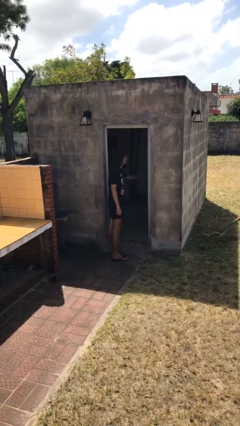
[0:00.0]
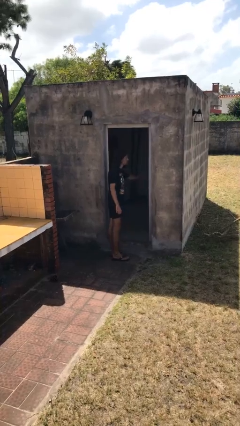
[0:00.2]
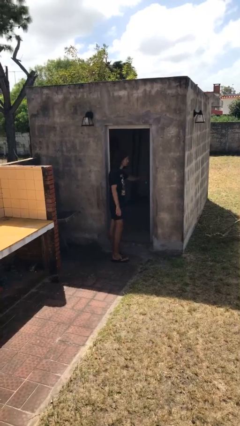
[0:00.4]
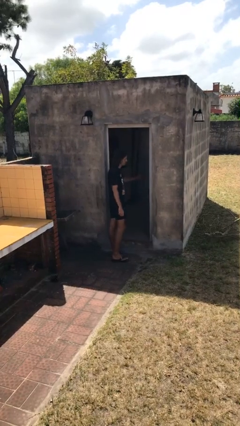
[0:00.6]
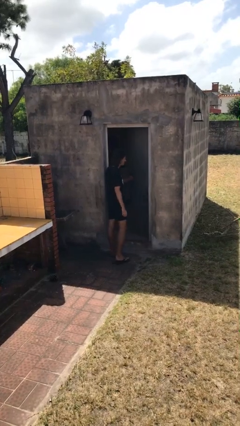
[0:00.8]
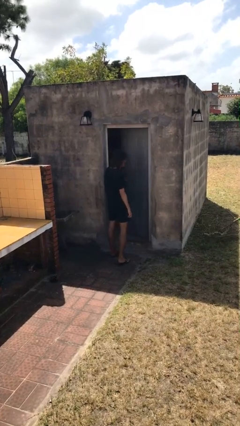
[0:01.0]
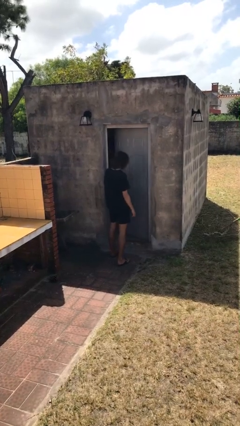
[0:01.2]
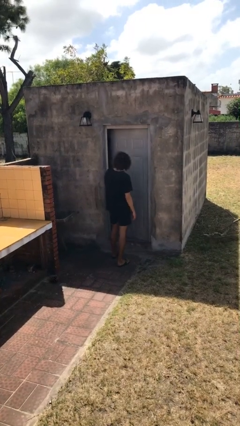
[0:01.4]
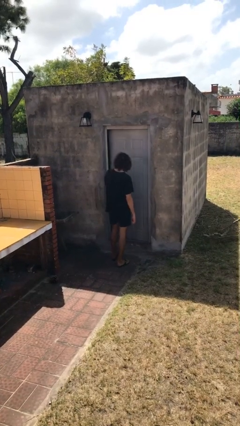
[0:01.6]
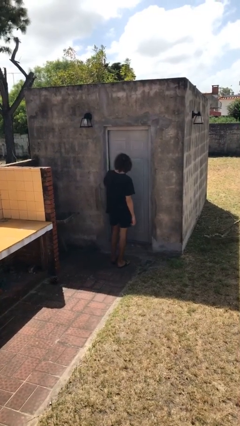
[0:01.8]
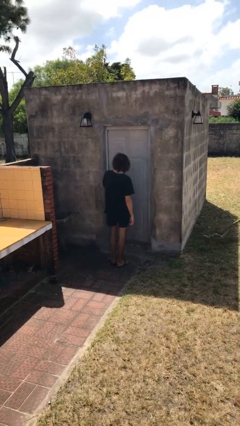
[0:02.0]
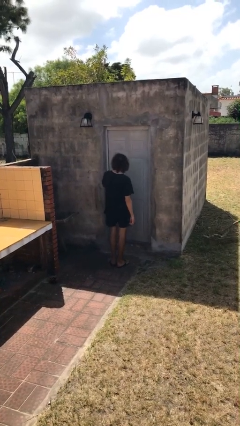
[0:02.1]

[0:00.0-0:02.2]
person closes facility door

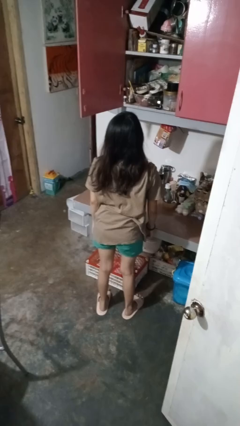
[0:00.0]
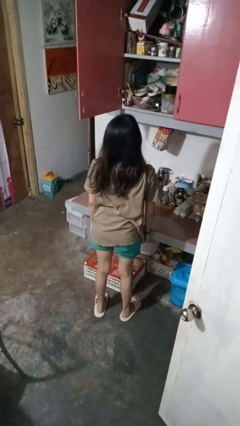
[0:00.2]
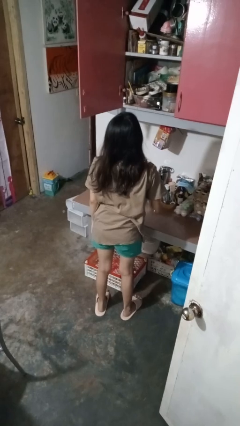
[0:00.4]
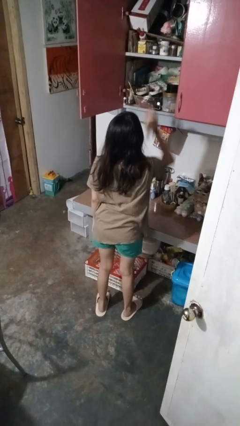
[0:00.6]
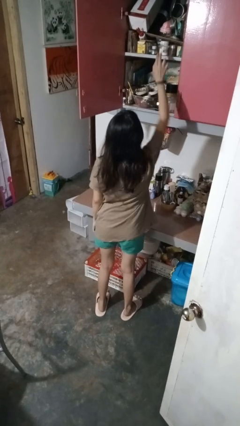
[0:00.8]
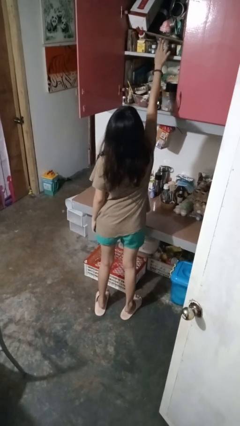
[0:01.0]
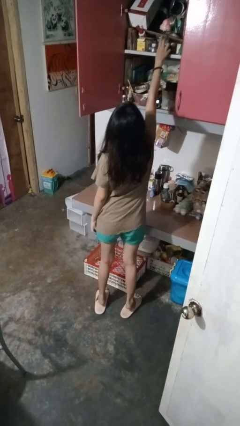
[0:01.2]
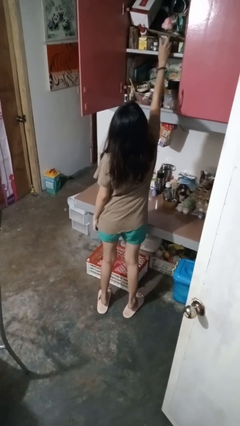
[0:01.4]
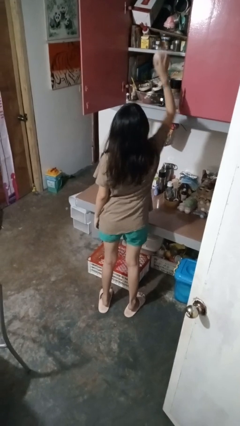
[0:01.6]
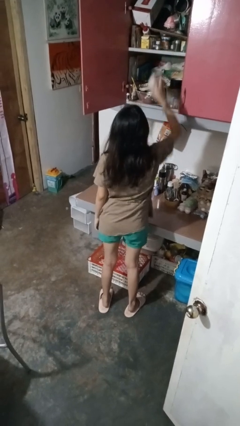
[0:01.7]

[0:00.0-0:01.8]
person takes object from cabinet

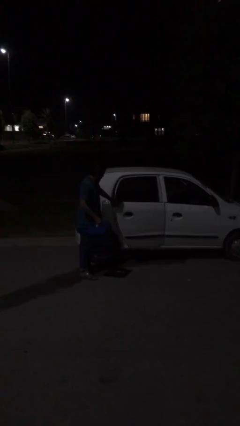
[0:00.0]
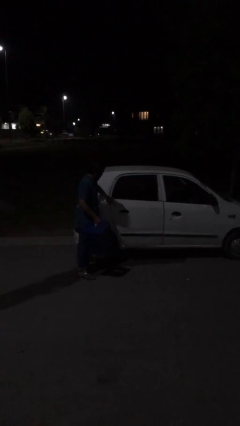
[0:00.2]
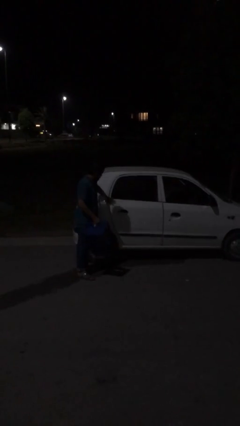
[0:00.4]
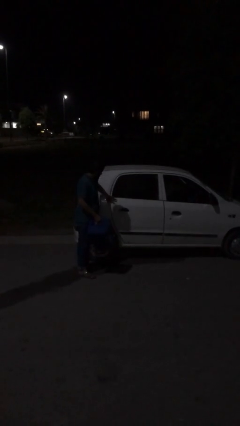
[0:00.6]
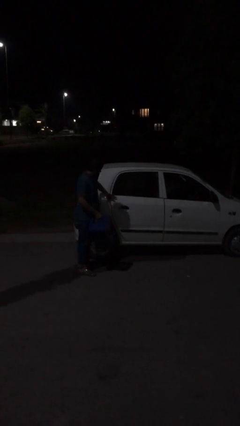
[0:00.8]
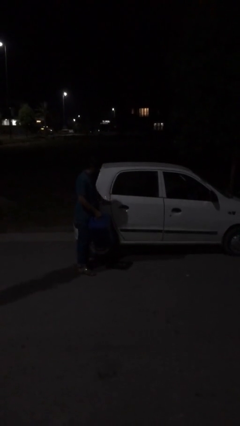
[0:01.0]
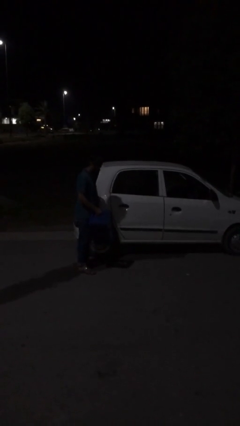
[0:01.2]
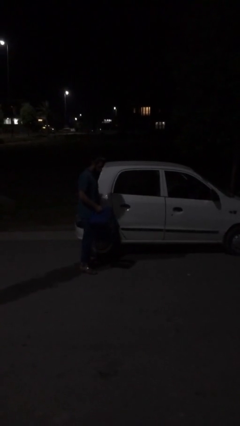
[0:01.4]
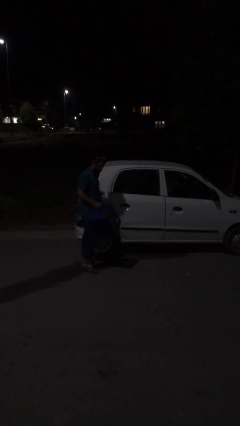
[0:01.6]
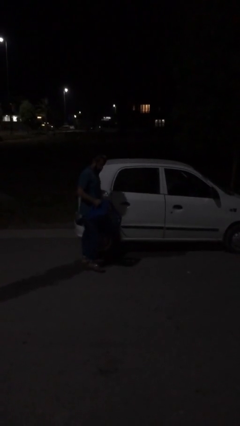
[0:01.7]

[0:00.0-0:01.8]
person closes car door

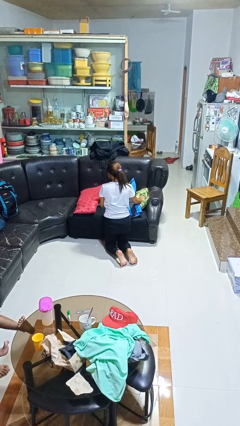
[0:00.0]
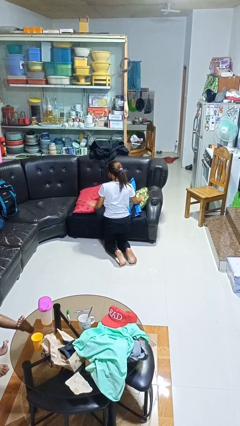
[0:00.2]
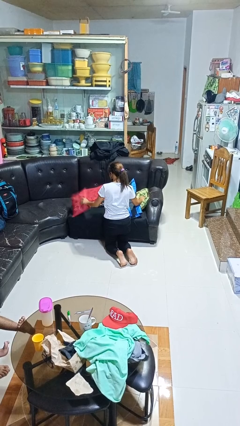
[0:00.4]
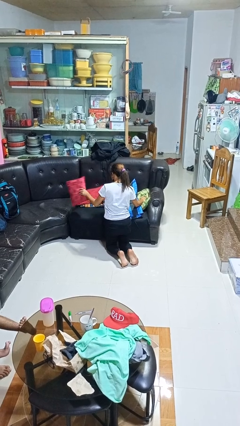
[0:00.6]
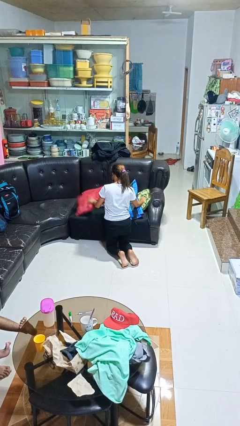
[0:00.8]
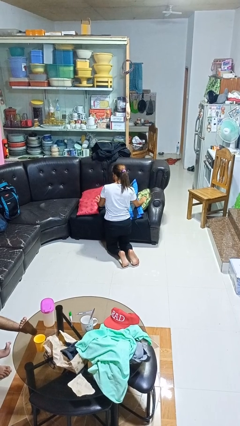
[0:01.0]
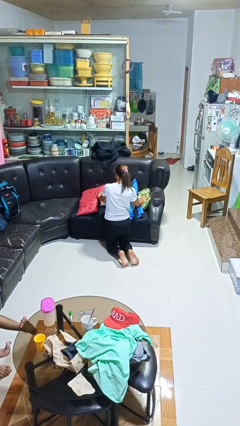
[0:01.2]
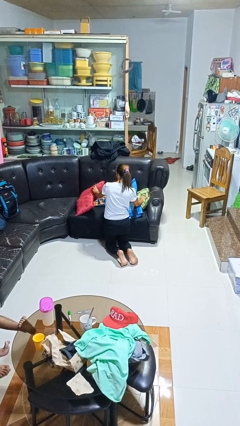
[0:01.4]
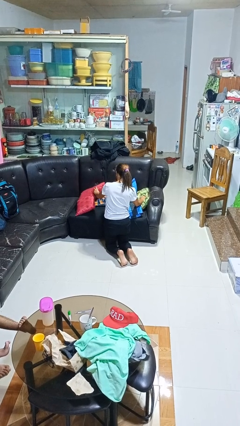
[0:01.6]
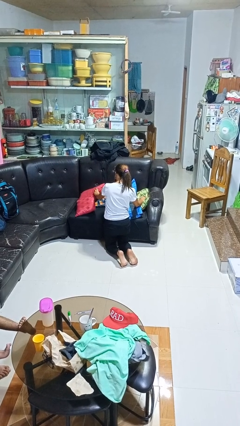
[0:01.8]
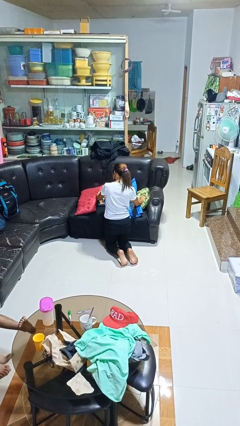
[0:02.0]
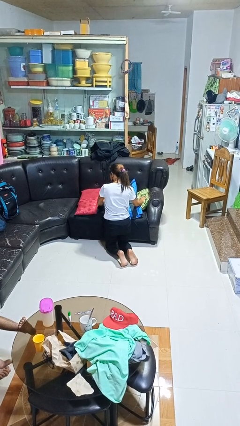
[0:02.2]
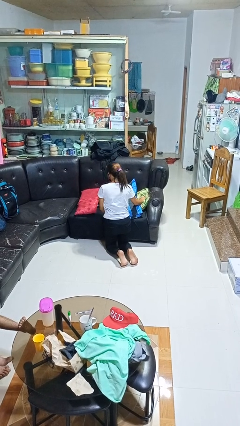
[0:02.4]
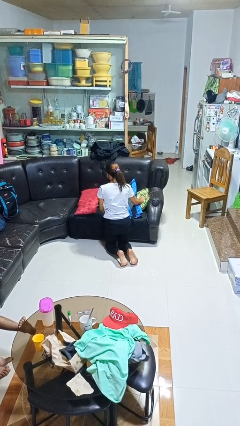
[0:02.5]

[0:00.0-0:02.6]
person searches in couch

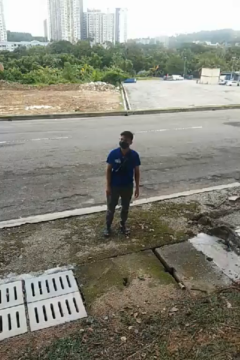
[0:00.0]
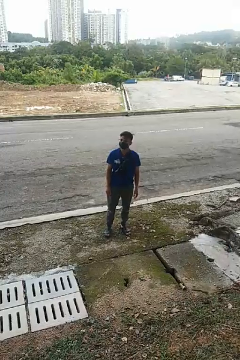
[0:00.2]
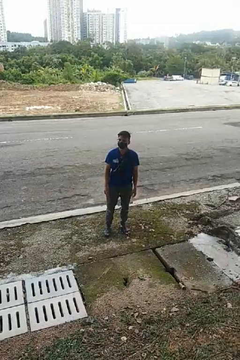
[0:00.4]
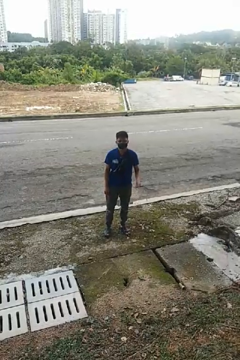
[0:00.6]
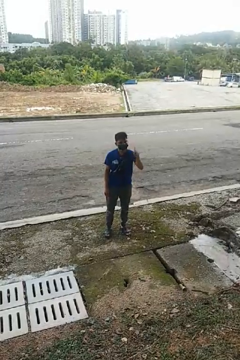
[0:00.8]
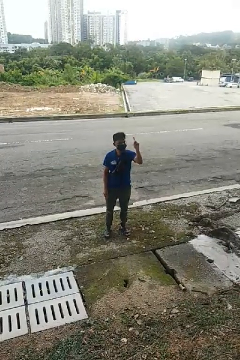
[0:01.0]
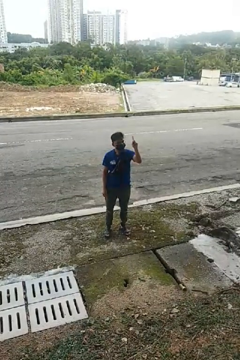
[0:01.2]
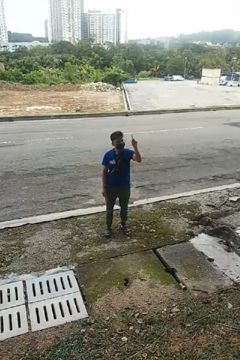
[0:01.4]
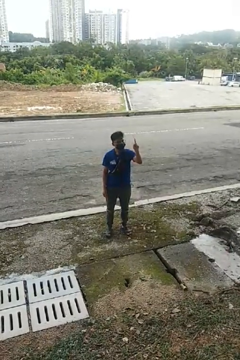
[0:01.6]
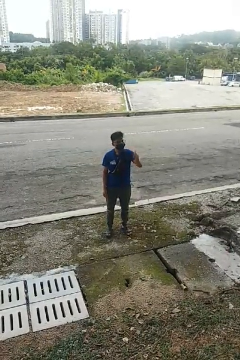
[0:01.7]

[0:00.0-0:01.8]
person gestures number one

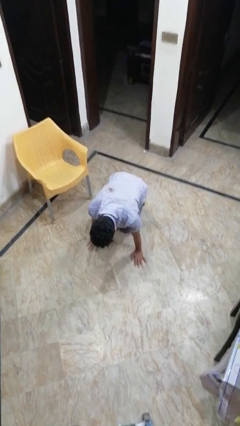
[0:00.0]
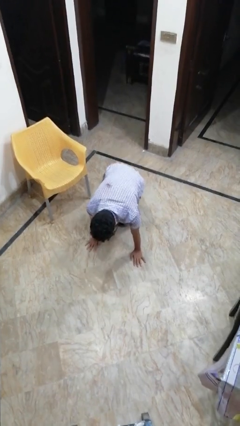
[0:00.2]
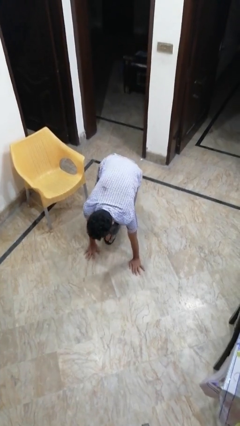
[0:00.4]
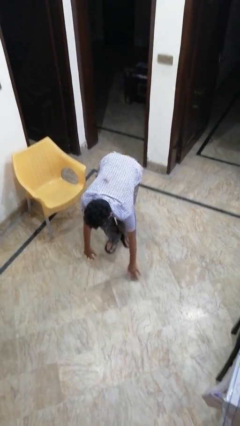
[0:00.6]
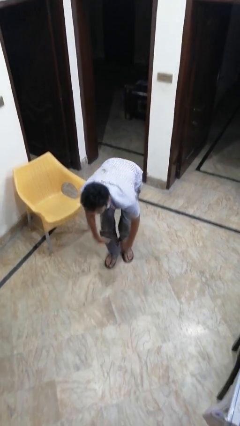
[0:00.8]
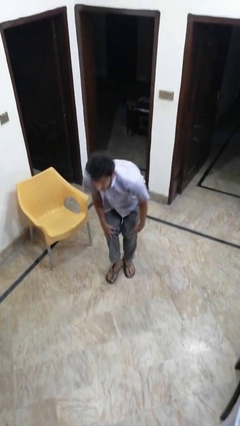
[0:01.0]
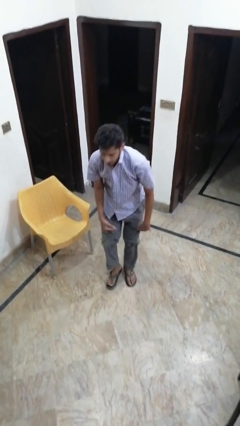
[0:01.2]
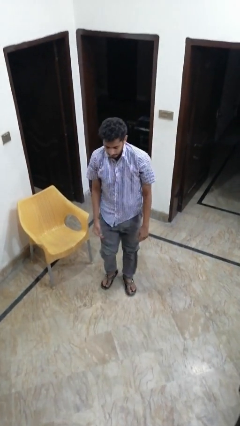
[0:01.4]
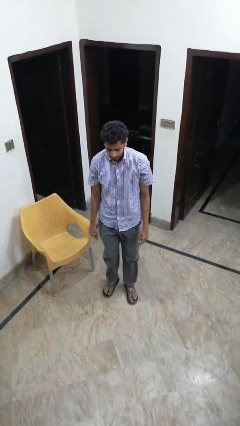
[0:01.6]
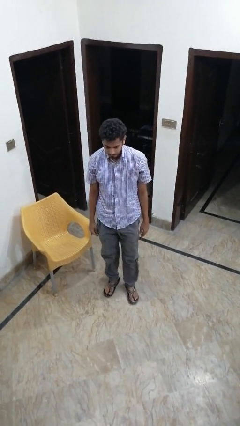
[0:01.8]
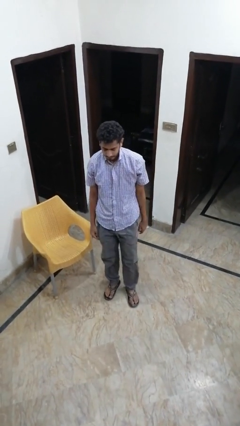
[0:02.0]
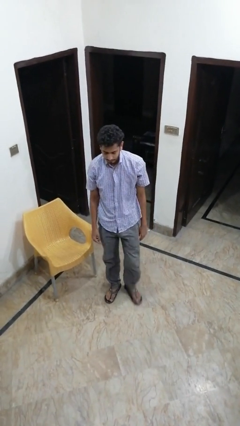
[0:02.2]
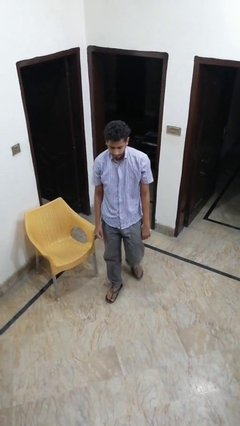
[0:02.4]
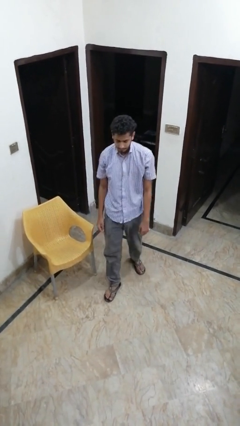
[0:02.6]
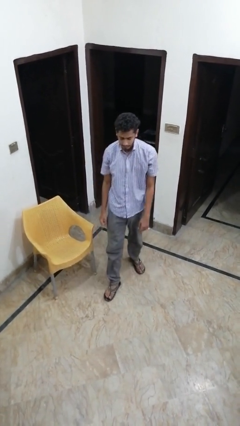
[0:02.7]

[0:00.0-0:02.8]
person stands up from floor

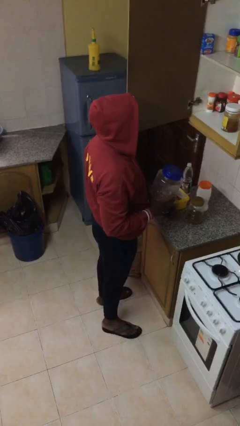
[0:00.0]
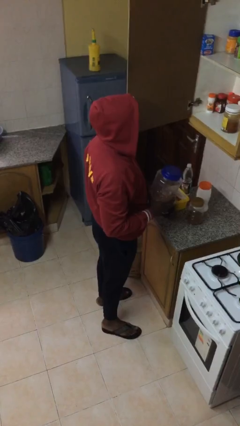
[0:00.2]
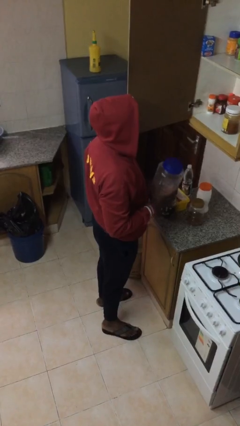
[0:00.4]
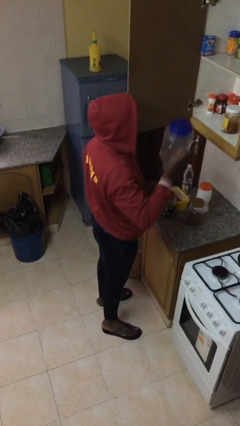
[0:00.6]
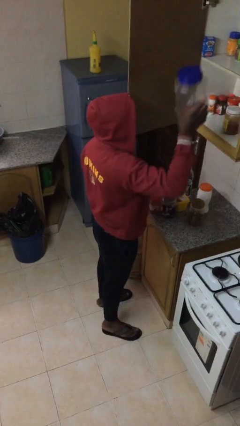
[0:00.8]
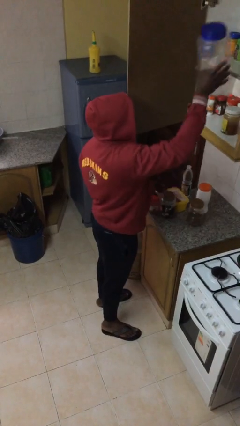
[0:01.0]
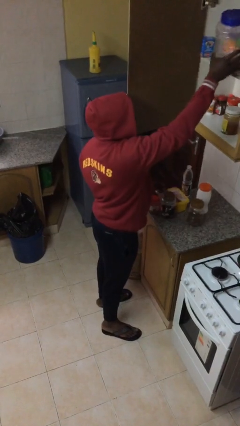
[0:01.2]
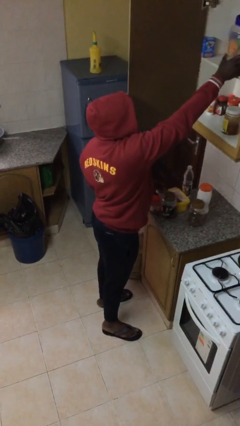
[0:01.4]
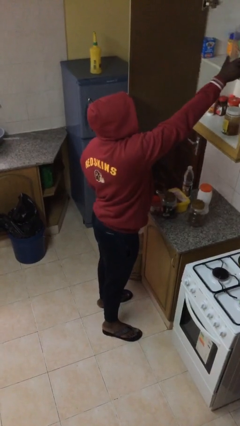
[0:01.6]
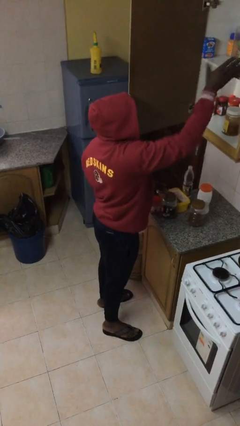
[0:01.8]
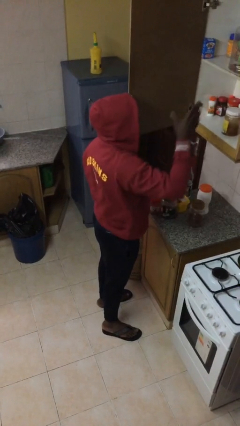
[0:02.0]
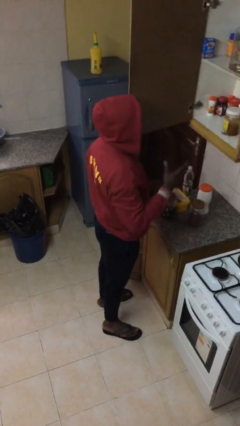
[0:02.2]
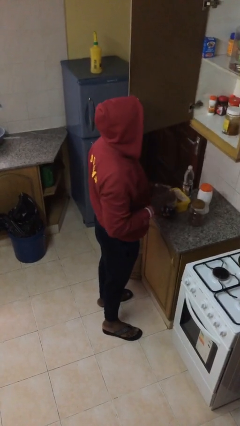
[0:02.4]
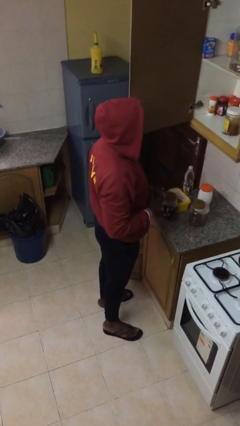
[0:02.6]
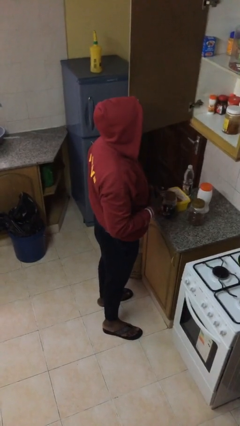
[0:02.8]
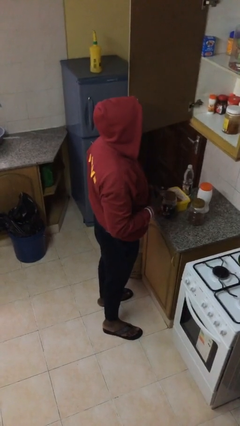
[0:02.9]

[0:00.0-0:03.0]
person puts down object on shelf

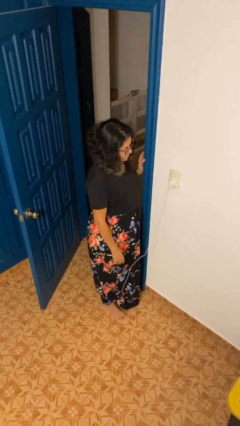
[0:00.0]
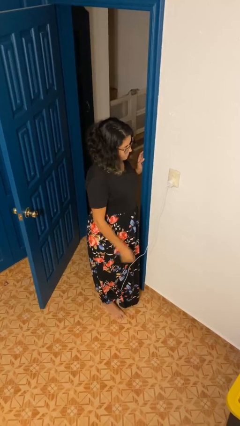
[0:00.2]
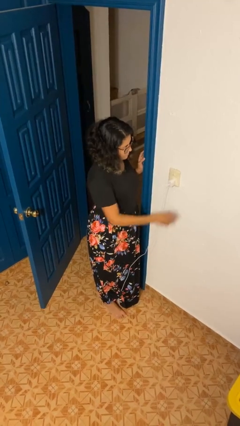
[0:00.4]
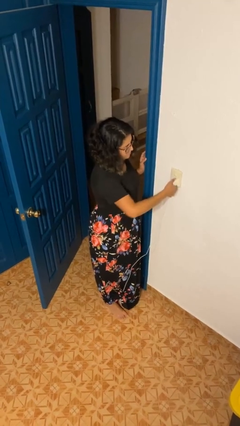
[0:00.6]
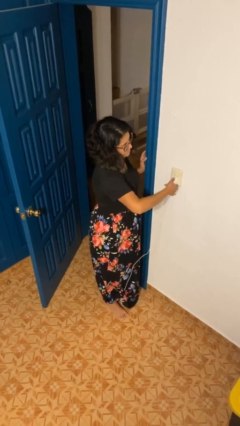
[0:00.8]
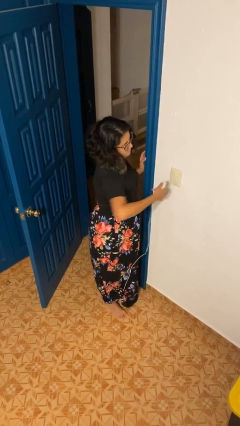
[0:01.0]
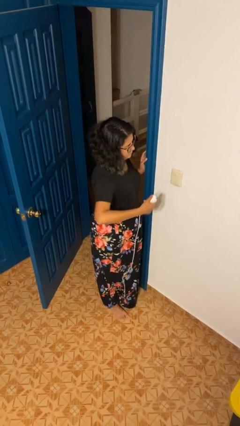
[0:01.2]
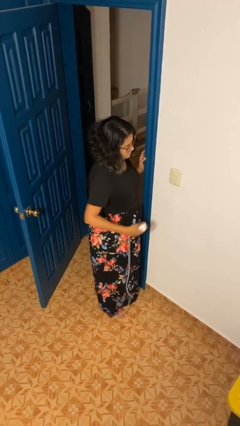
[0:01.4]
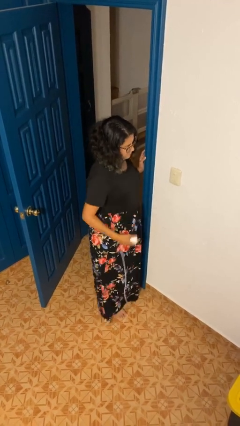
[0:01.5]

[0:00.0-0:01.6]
person unplugs from electrical socket
